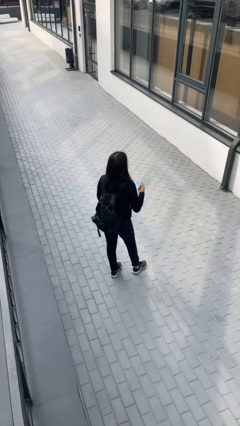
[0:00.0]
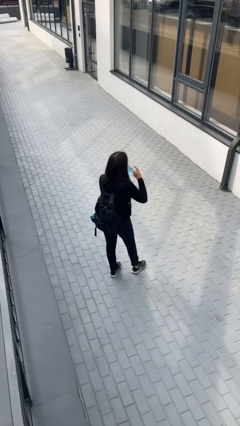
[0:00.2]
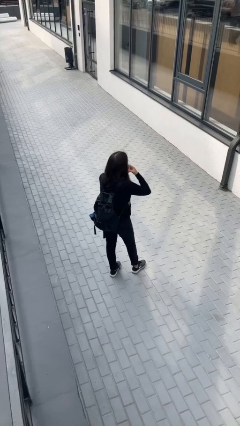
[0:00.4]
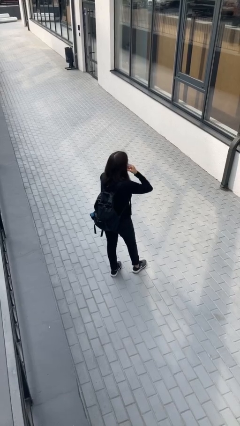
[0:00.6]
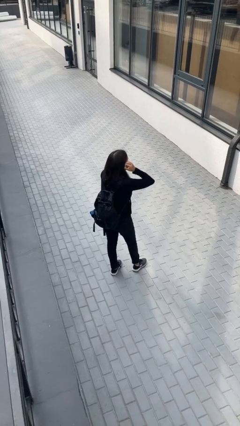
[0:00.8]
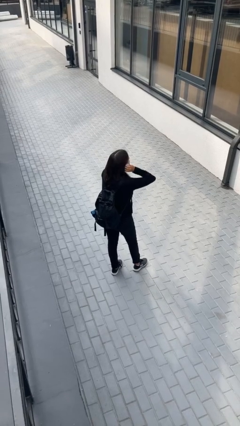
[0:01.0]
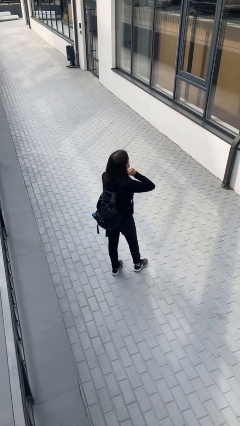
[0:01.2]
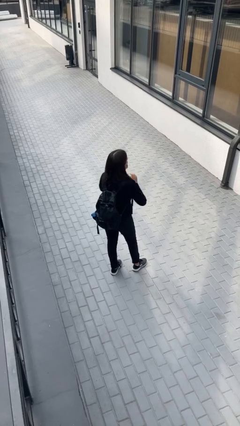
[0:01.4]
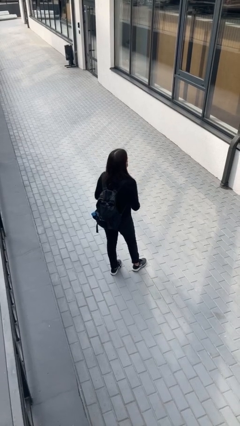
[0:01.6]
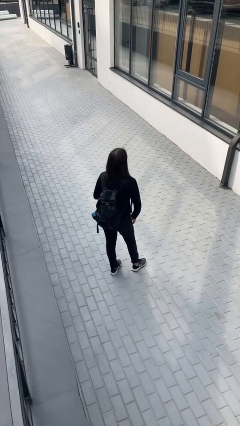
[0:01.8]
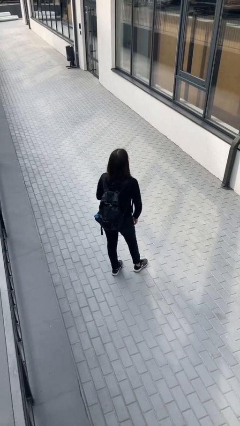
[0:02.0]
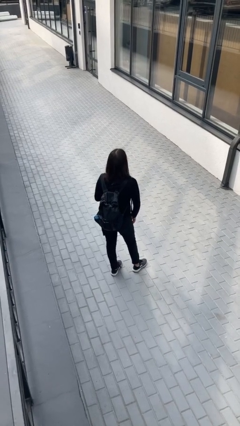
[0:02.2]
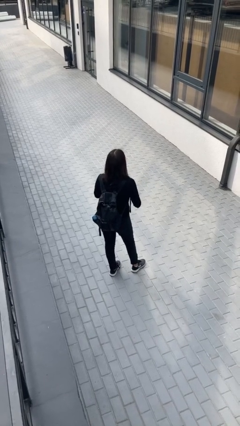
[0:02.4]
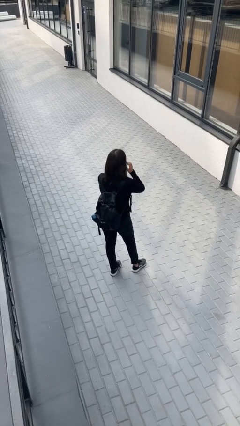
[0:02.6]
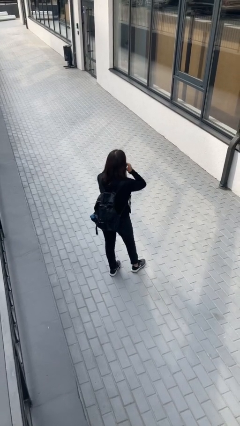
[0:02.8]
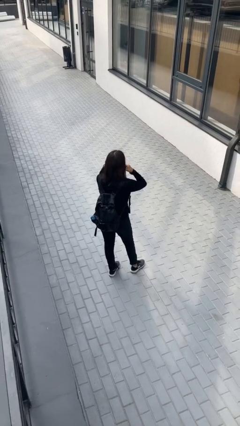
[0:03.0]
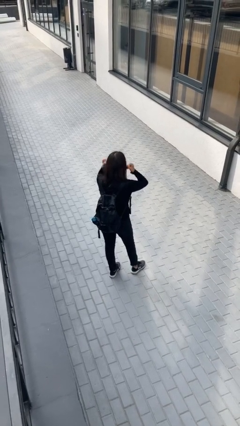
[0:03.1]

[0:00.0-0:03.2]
person puts on facemask

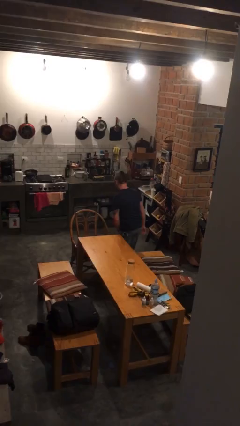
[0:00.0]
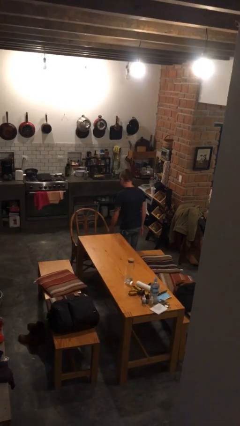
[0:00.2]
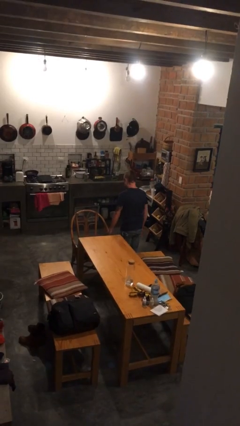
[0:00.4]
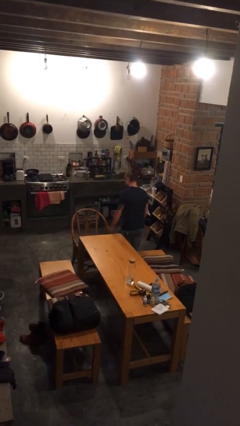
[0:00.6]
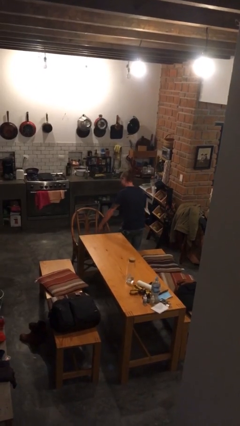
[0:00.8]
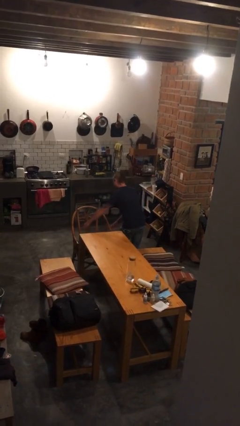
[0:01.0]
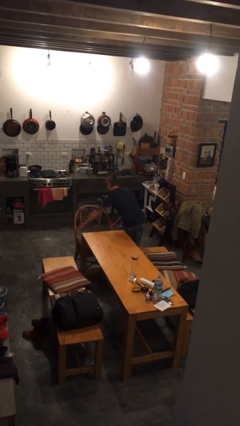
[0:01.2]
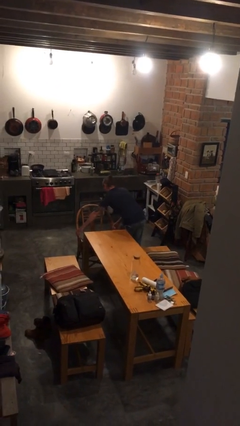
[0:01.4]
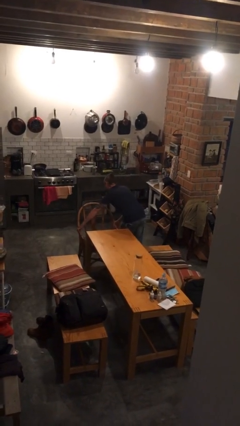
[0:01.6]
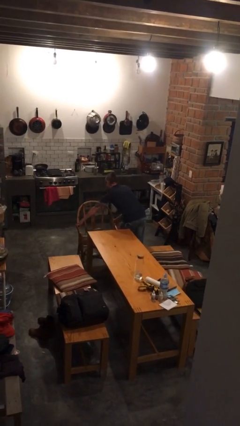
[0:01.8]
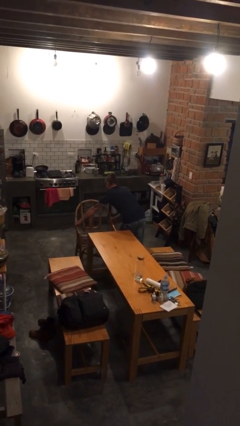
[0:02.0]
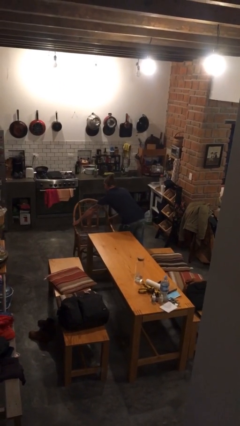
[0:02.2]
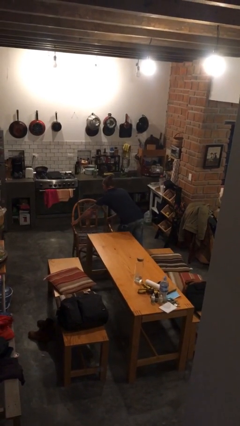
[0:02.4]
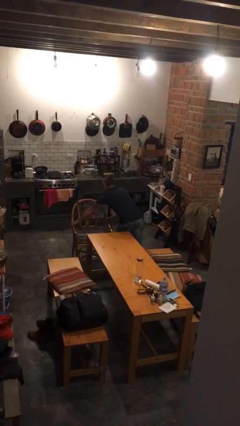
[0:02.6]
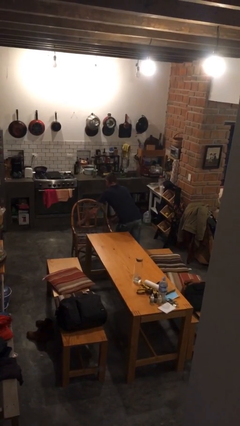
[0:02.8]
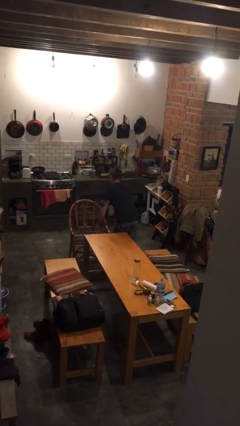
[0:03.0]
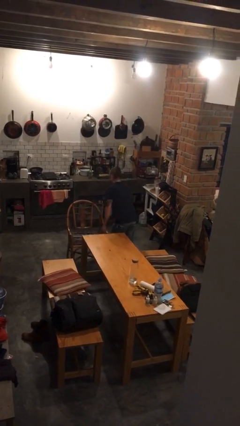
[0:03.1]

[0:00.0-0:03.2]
person pulls out chair

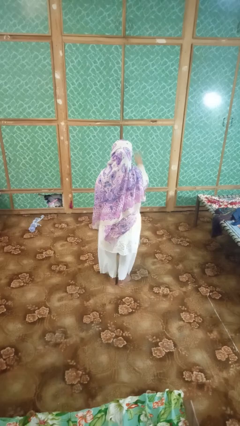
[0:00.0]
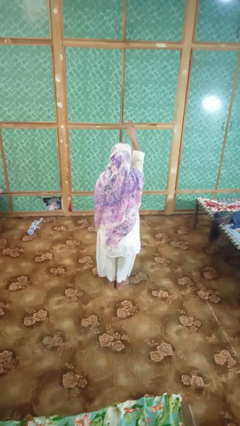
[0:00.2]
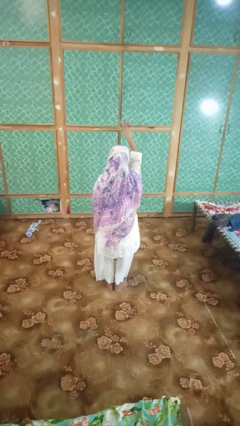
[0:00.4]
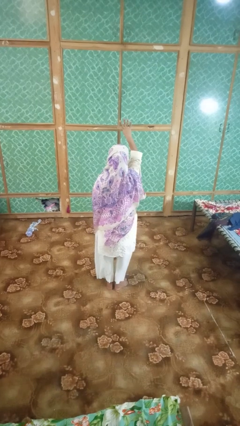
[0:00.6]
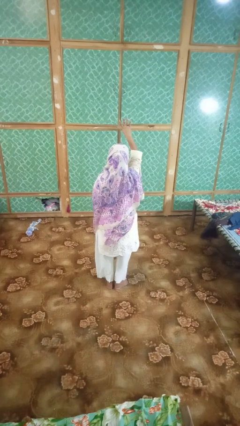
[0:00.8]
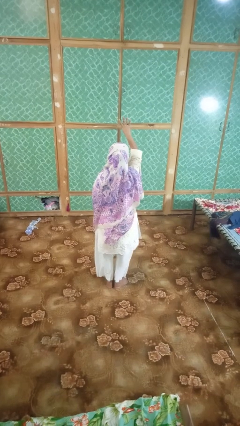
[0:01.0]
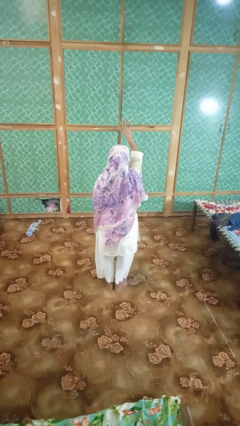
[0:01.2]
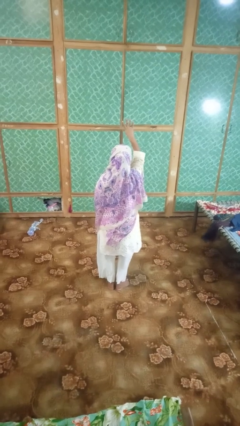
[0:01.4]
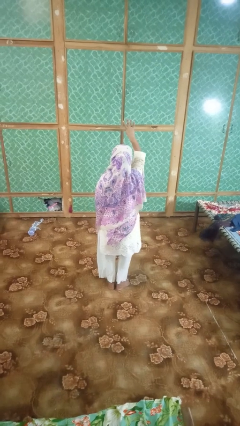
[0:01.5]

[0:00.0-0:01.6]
person gestures number four

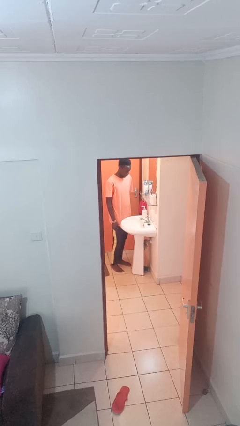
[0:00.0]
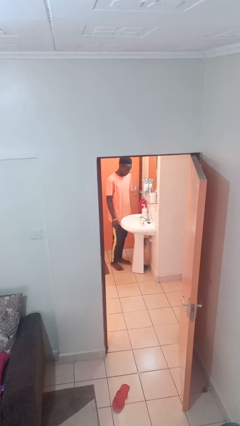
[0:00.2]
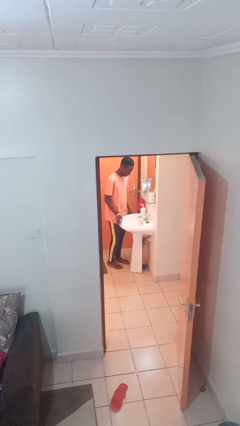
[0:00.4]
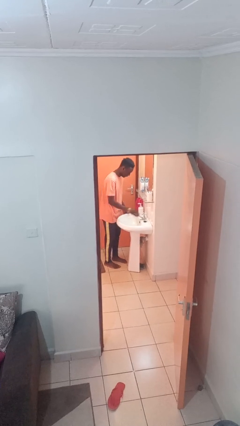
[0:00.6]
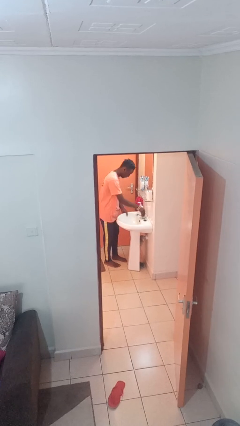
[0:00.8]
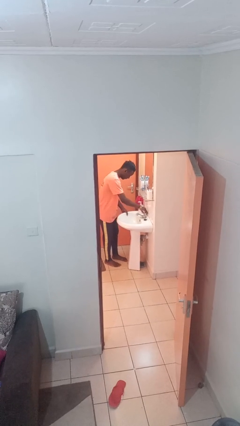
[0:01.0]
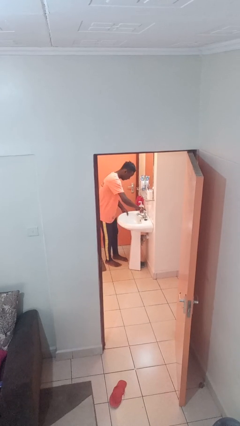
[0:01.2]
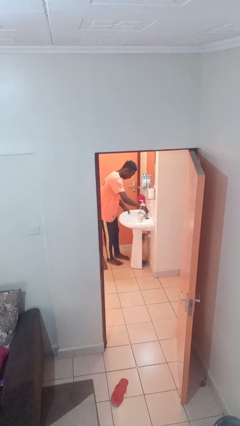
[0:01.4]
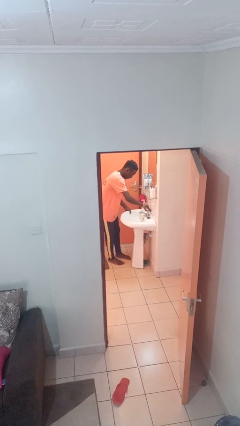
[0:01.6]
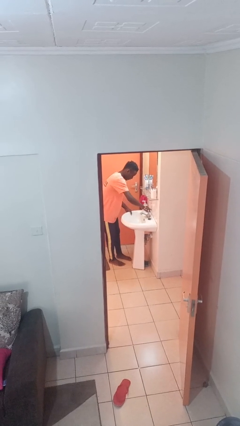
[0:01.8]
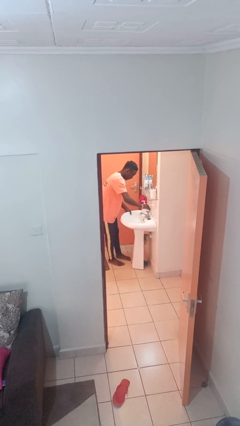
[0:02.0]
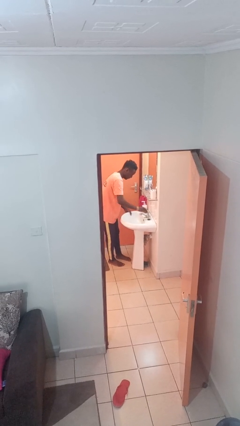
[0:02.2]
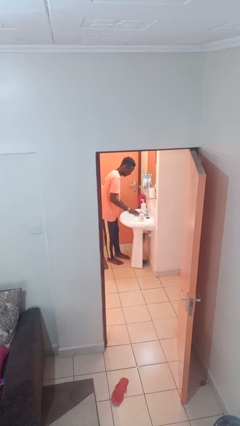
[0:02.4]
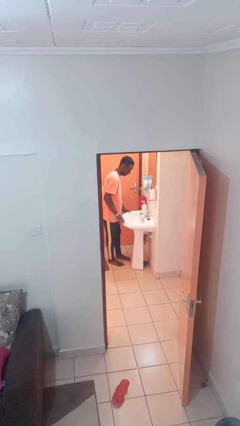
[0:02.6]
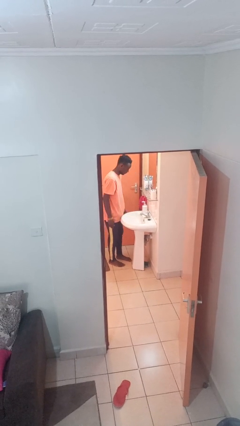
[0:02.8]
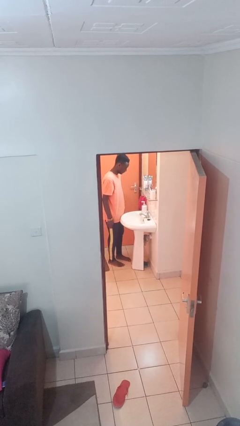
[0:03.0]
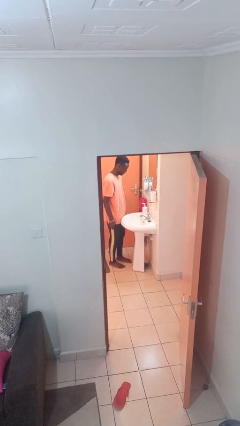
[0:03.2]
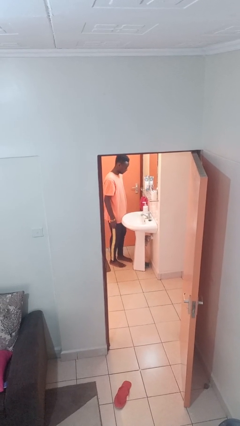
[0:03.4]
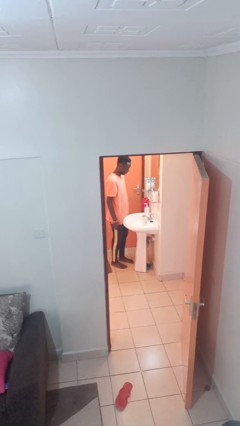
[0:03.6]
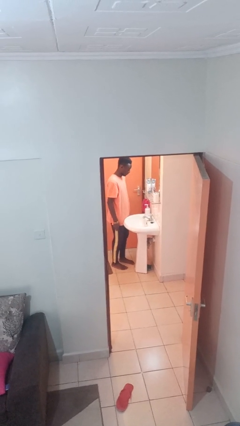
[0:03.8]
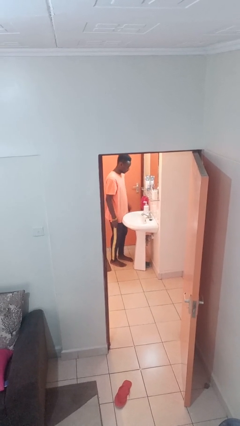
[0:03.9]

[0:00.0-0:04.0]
person turns on faucet

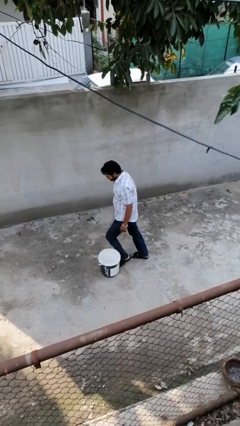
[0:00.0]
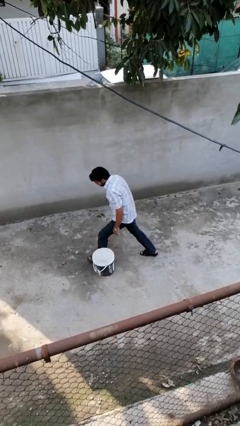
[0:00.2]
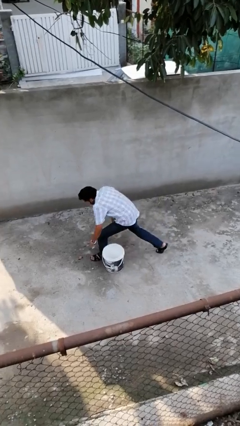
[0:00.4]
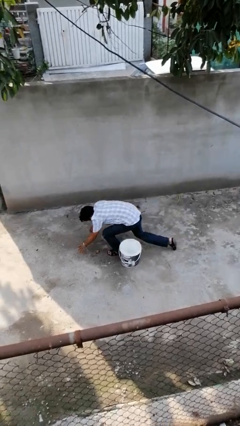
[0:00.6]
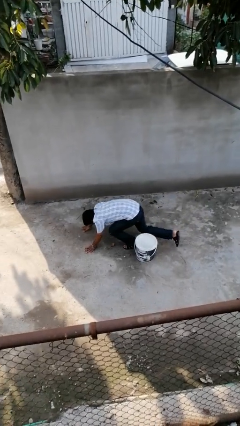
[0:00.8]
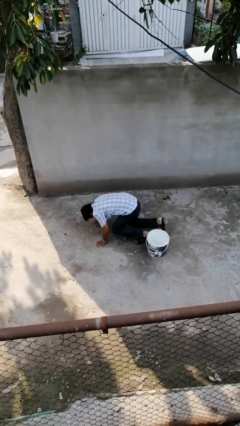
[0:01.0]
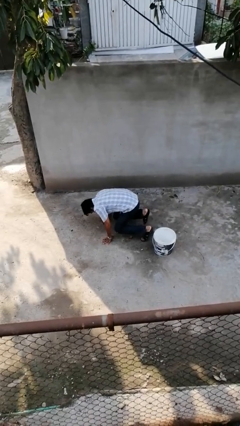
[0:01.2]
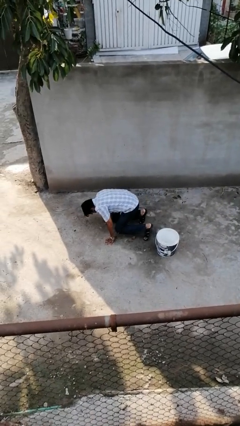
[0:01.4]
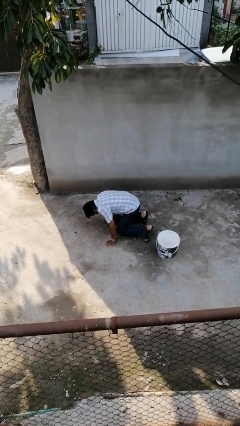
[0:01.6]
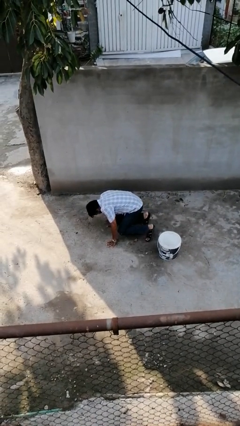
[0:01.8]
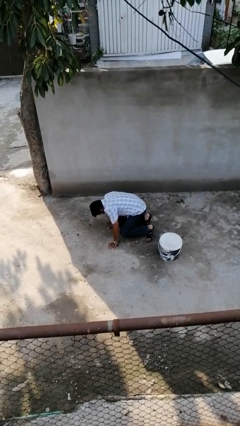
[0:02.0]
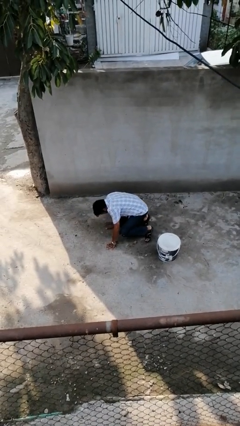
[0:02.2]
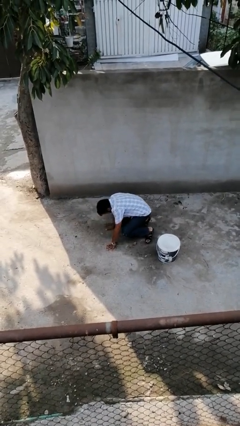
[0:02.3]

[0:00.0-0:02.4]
person trips on object on floor

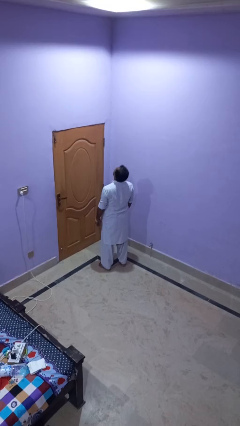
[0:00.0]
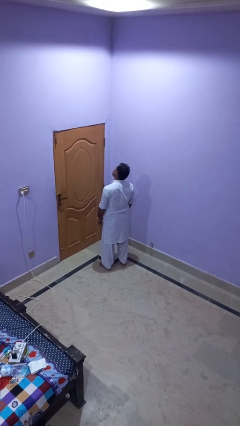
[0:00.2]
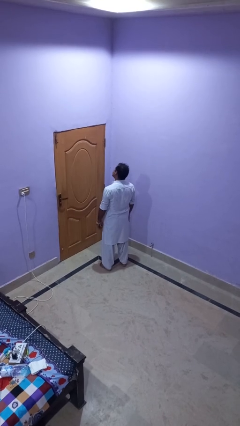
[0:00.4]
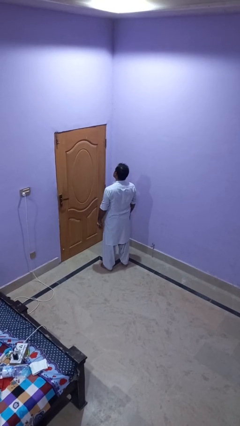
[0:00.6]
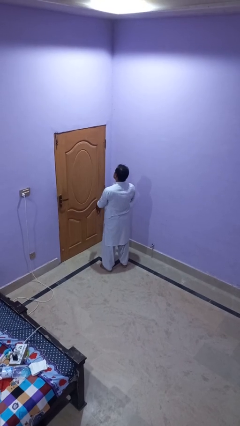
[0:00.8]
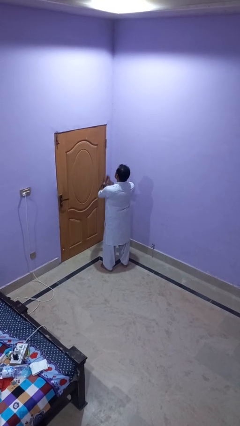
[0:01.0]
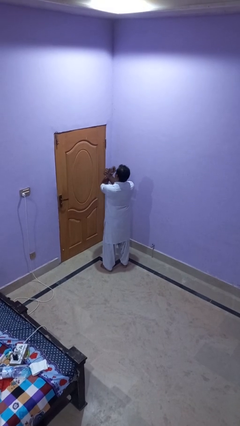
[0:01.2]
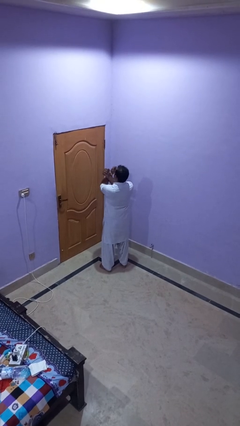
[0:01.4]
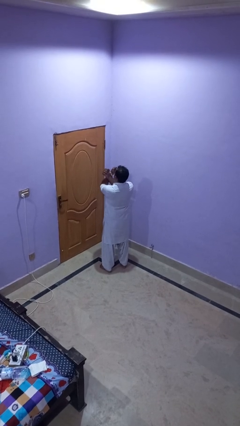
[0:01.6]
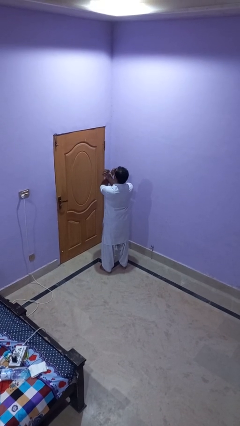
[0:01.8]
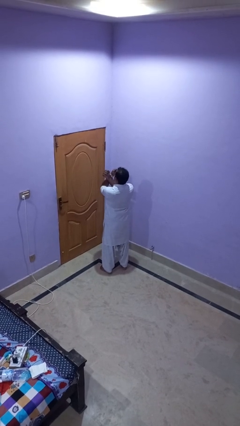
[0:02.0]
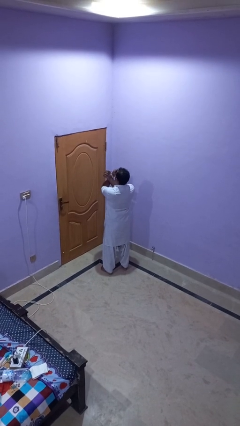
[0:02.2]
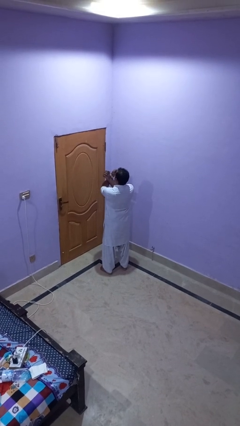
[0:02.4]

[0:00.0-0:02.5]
person crosses arms
